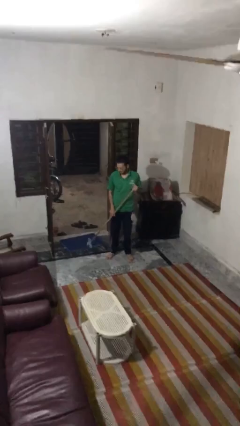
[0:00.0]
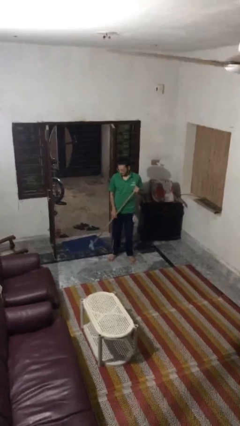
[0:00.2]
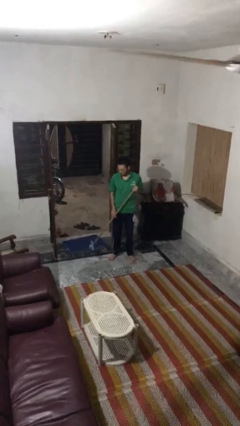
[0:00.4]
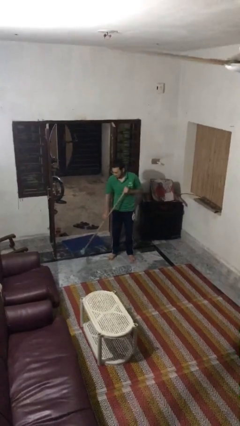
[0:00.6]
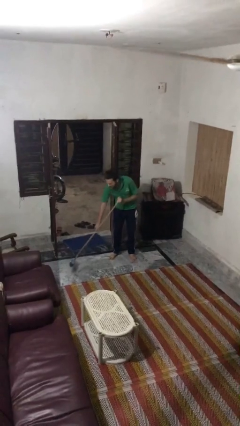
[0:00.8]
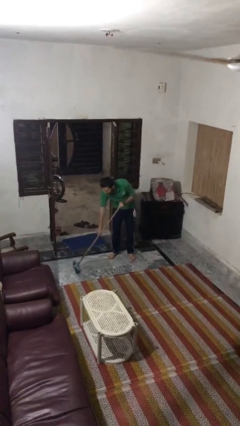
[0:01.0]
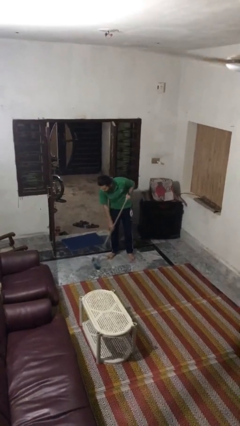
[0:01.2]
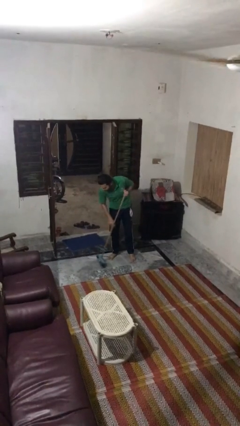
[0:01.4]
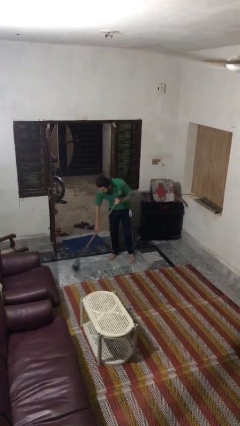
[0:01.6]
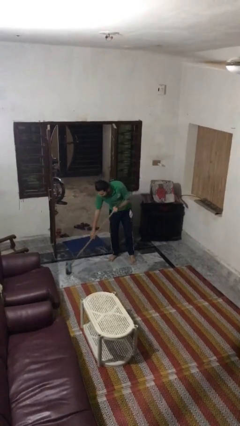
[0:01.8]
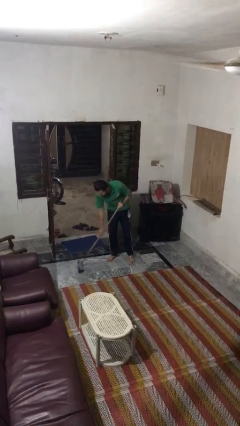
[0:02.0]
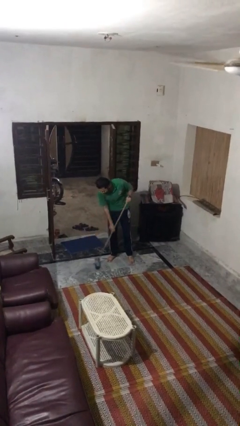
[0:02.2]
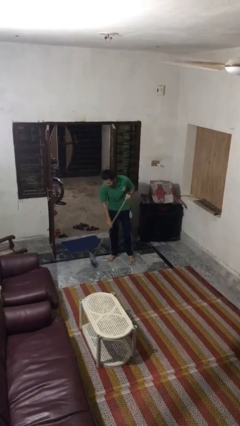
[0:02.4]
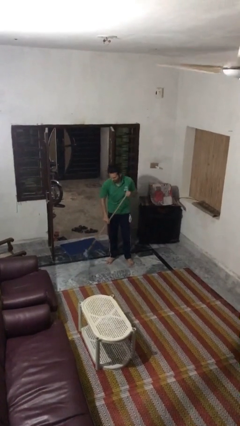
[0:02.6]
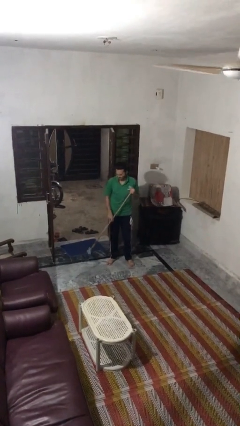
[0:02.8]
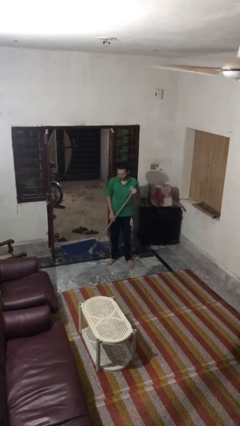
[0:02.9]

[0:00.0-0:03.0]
person sweeps floor

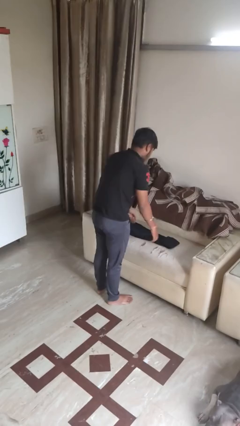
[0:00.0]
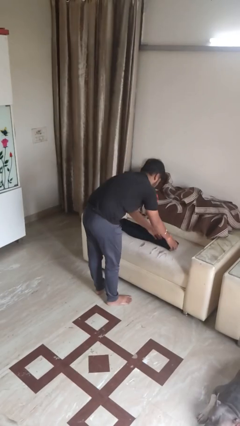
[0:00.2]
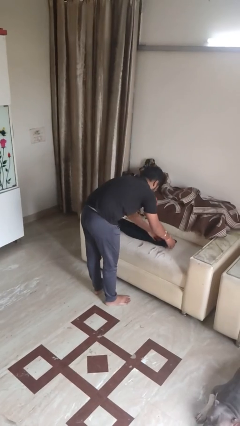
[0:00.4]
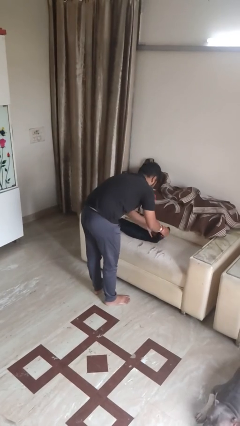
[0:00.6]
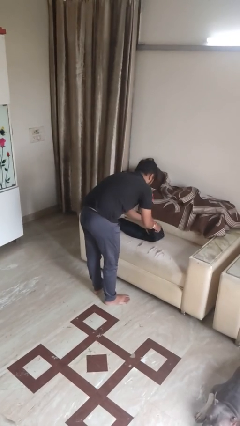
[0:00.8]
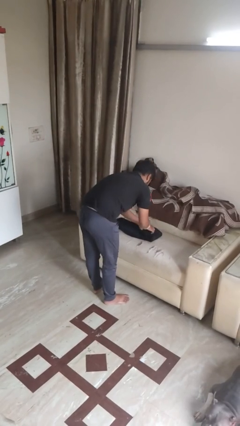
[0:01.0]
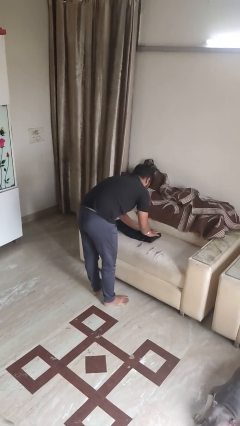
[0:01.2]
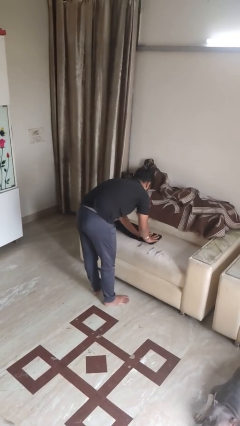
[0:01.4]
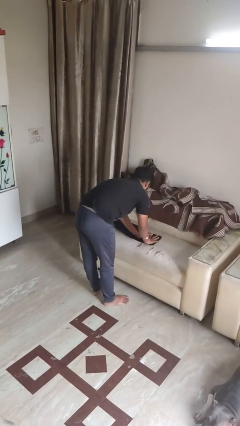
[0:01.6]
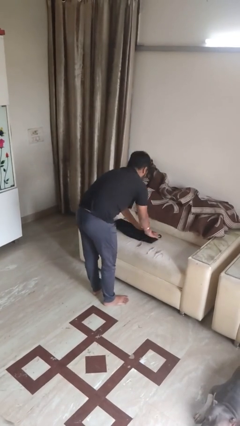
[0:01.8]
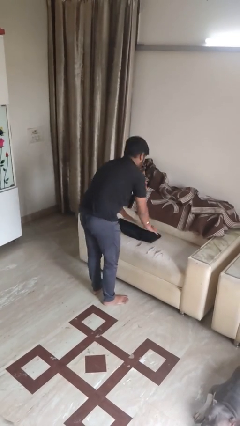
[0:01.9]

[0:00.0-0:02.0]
person folds pants

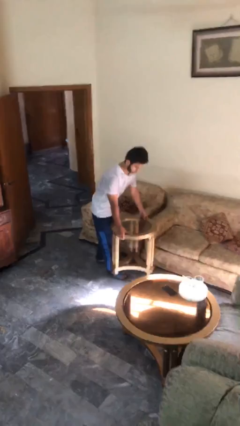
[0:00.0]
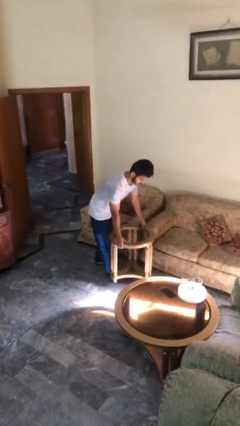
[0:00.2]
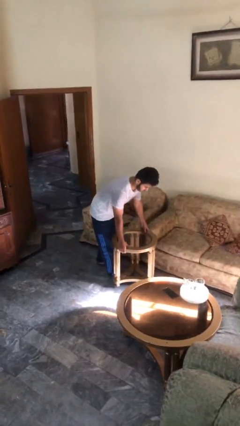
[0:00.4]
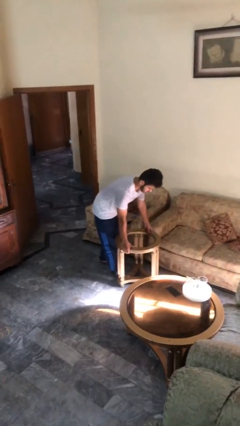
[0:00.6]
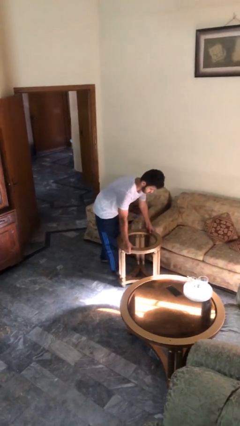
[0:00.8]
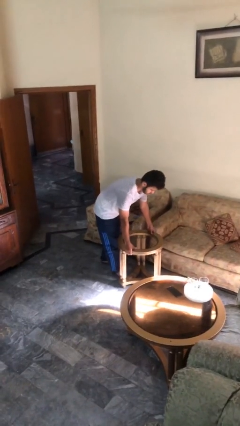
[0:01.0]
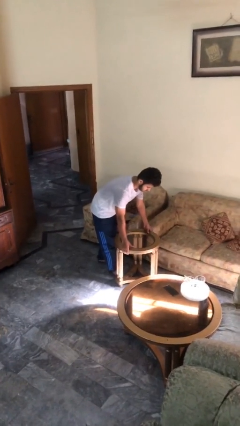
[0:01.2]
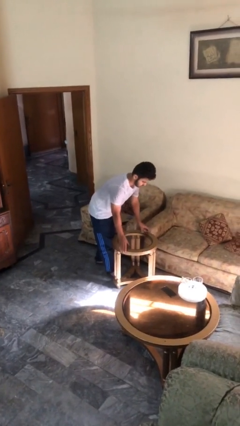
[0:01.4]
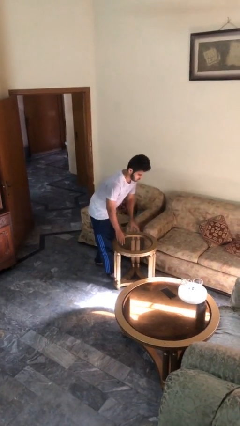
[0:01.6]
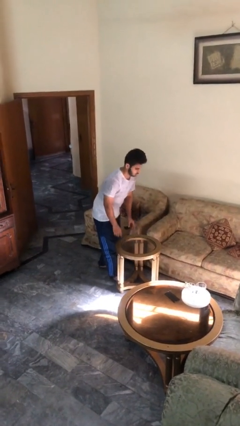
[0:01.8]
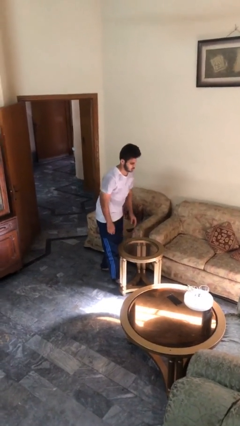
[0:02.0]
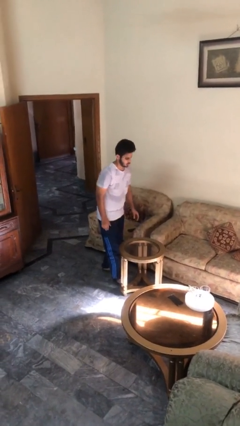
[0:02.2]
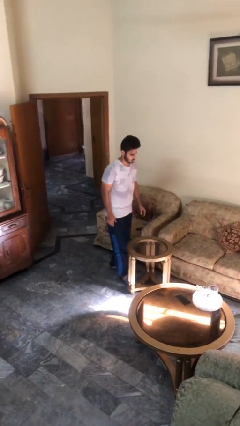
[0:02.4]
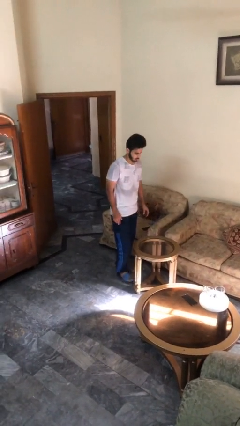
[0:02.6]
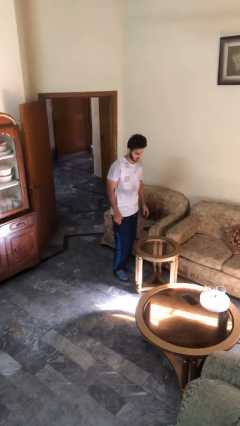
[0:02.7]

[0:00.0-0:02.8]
person puts down object on floor

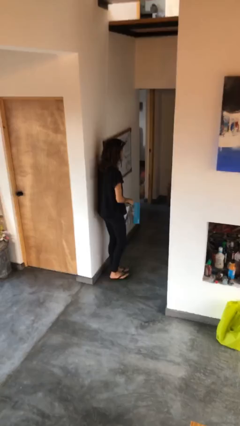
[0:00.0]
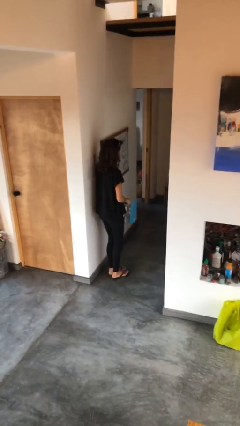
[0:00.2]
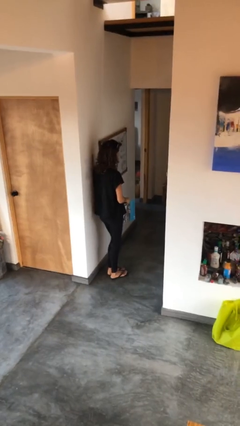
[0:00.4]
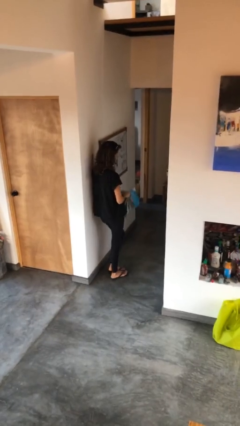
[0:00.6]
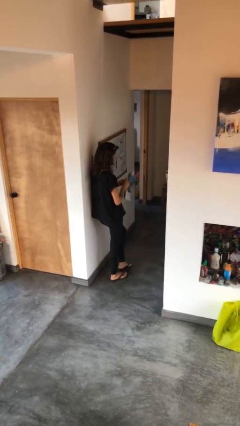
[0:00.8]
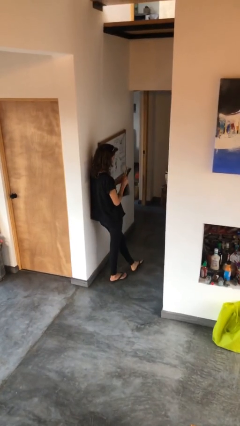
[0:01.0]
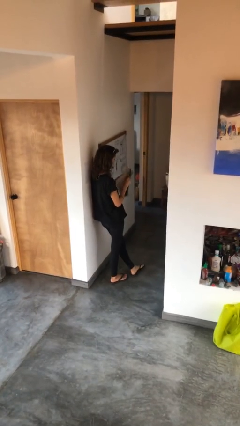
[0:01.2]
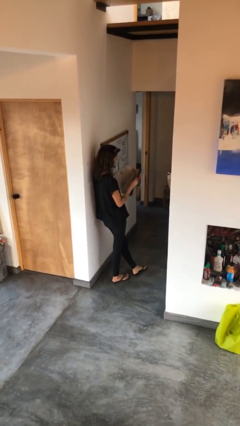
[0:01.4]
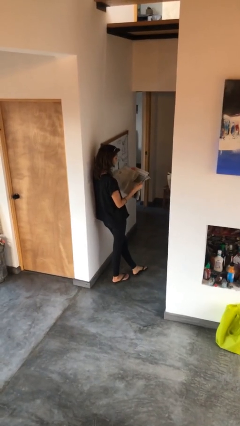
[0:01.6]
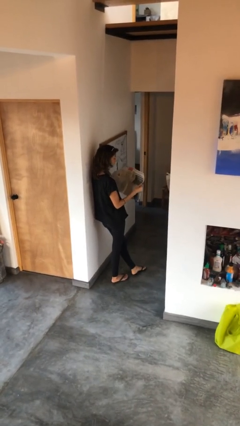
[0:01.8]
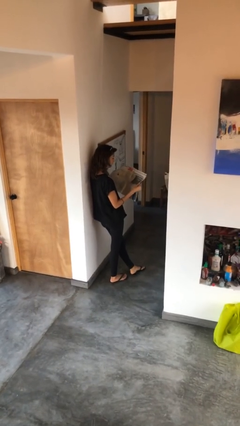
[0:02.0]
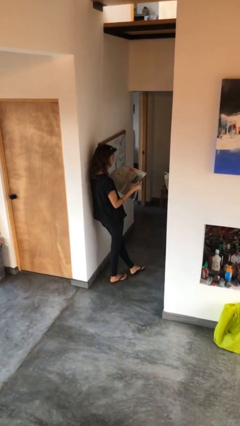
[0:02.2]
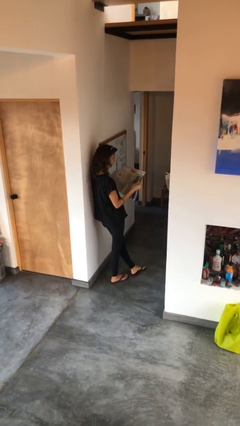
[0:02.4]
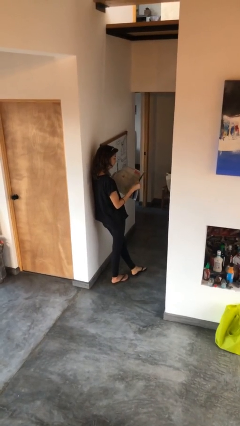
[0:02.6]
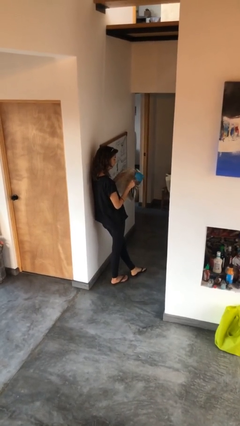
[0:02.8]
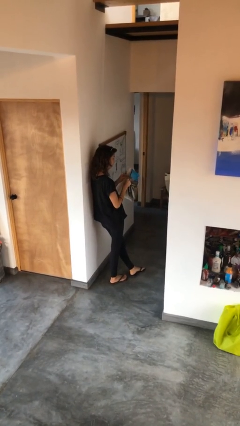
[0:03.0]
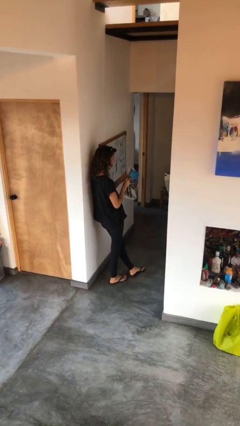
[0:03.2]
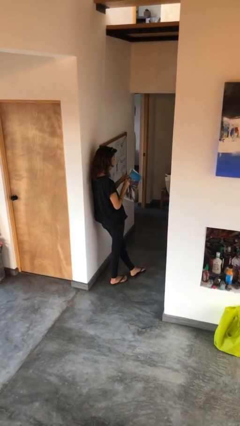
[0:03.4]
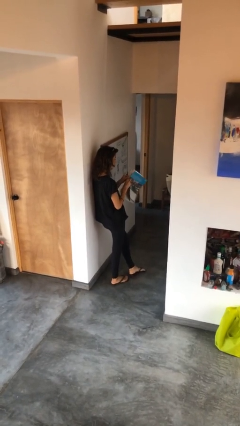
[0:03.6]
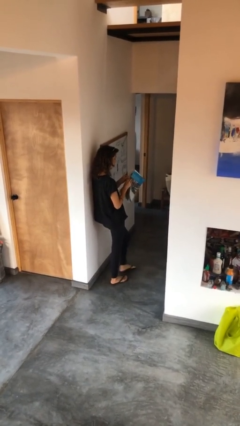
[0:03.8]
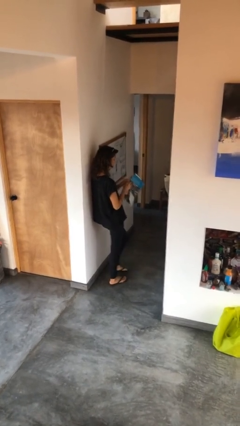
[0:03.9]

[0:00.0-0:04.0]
person reads newspaper

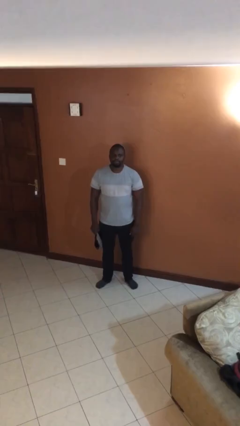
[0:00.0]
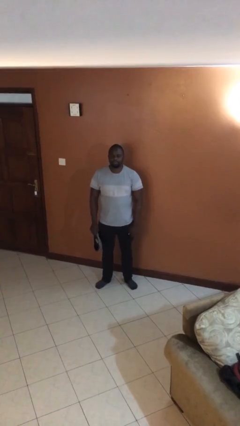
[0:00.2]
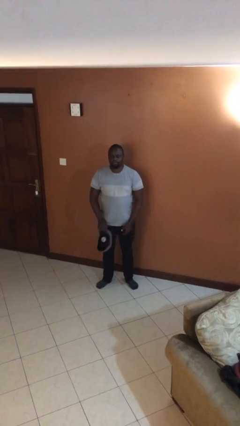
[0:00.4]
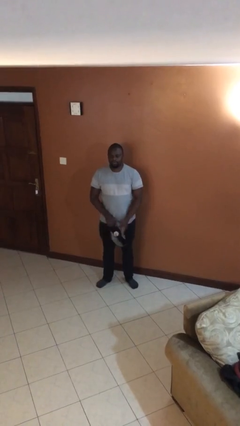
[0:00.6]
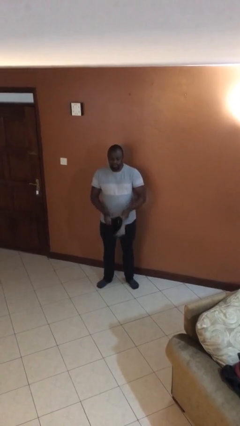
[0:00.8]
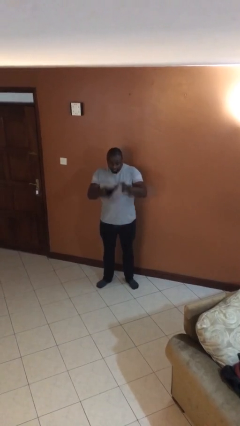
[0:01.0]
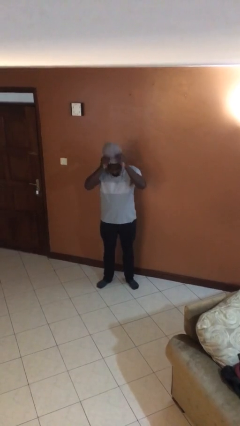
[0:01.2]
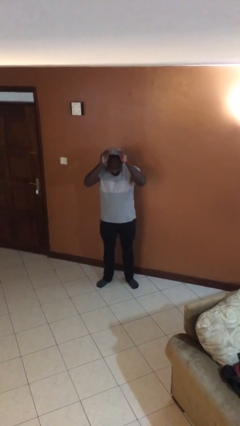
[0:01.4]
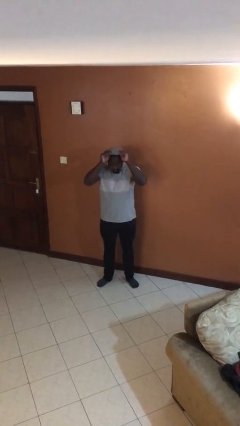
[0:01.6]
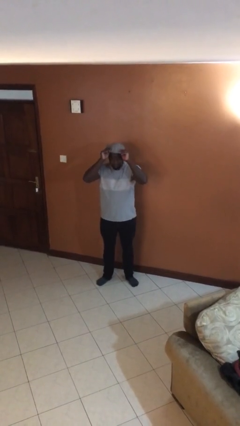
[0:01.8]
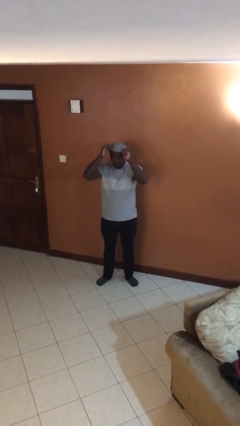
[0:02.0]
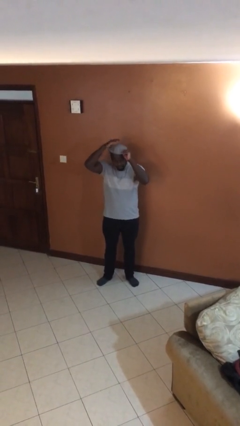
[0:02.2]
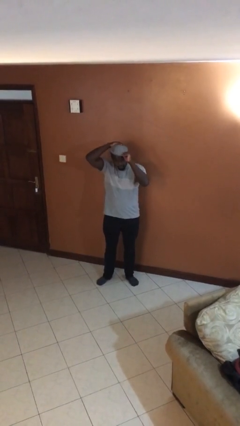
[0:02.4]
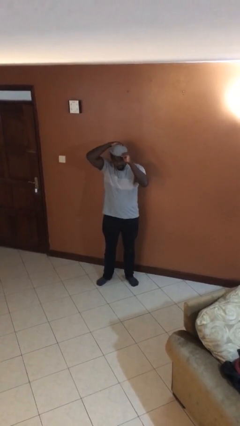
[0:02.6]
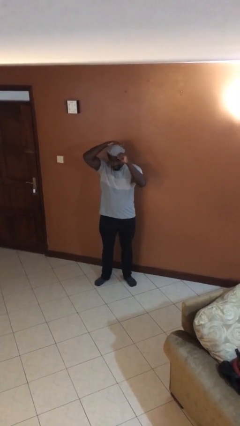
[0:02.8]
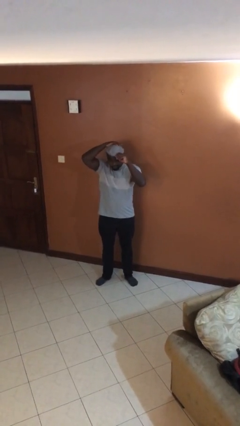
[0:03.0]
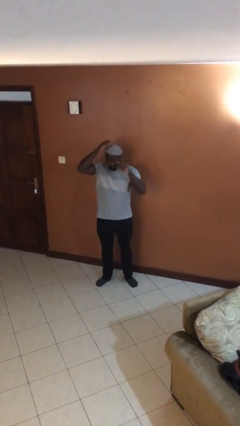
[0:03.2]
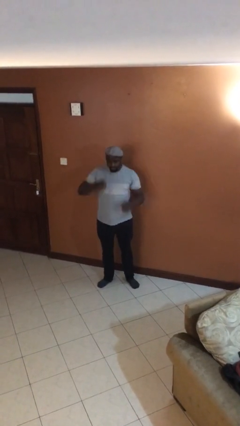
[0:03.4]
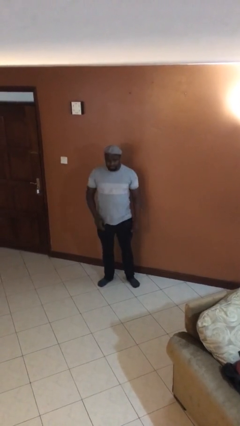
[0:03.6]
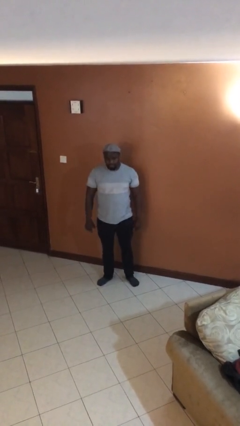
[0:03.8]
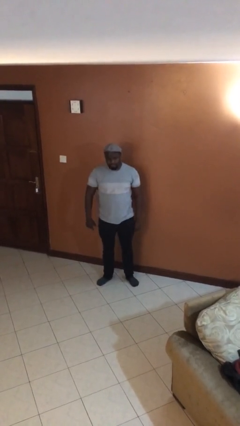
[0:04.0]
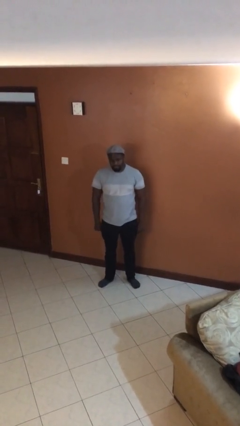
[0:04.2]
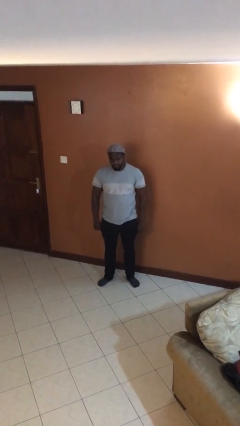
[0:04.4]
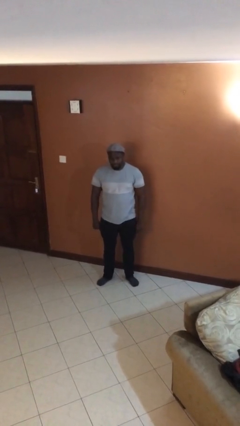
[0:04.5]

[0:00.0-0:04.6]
person puts on hat

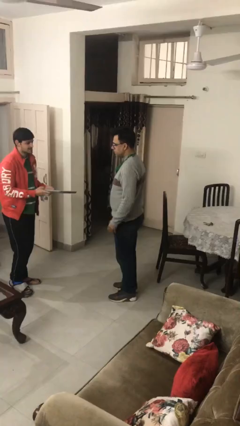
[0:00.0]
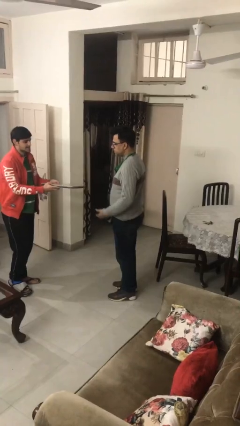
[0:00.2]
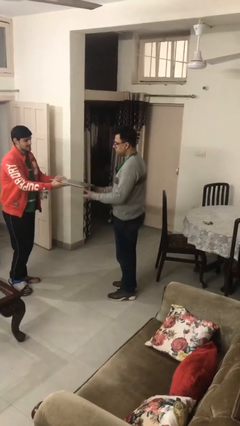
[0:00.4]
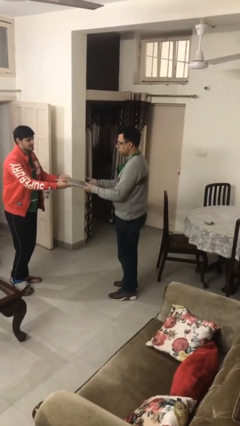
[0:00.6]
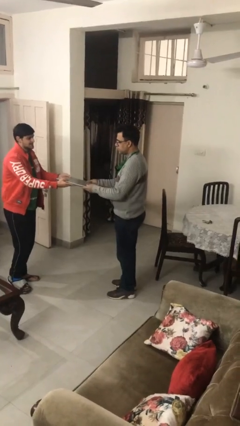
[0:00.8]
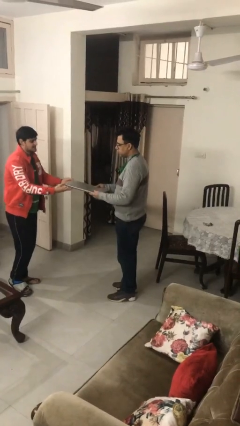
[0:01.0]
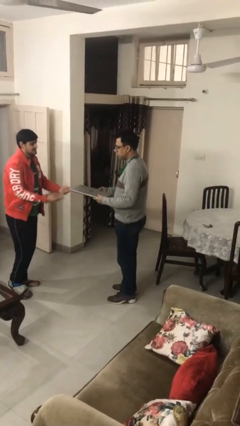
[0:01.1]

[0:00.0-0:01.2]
person transfers object to person
